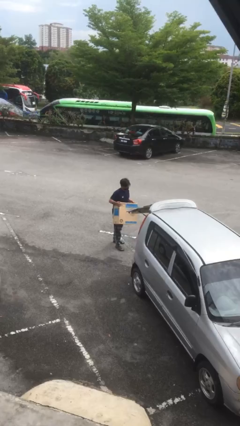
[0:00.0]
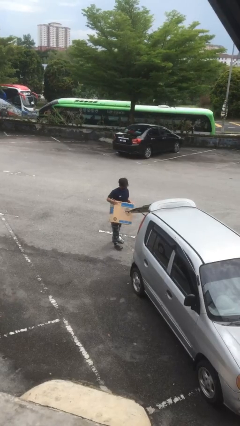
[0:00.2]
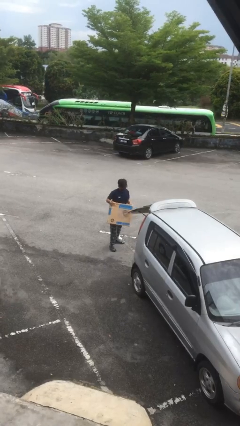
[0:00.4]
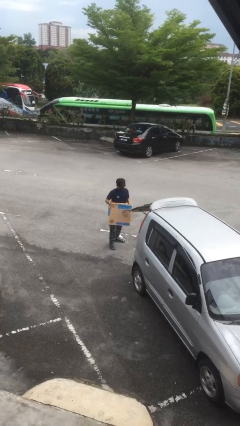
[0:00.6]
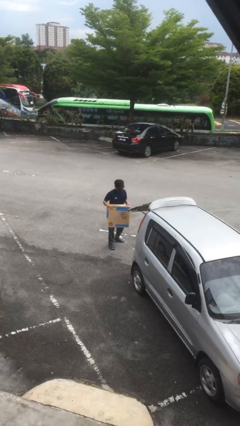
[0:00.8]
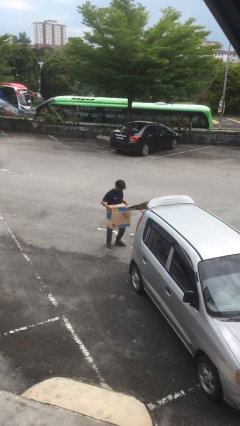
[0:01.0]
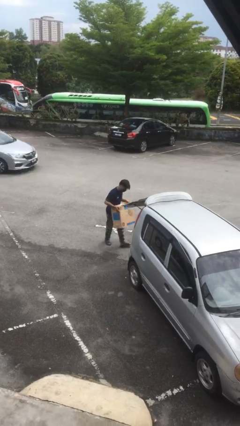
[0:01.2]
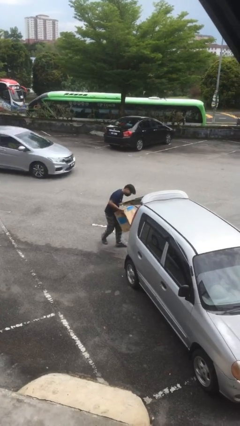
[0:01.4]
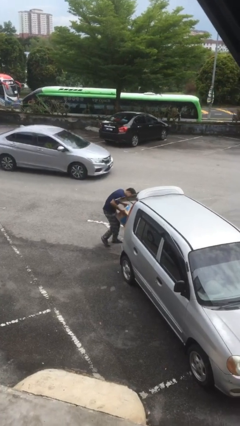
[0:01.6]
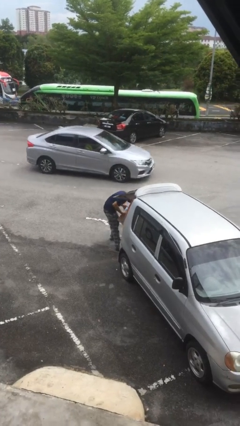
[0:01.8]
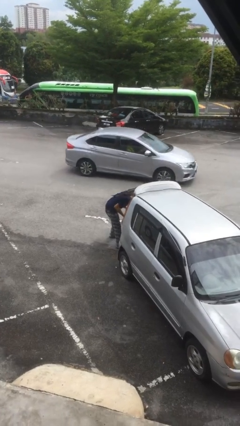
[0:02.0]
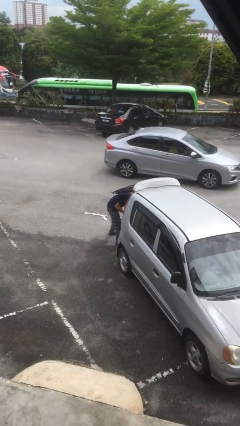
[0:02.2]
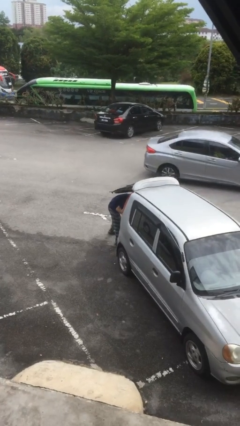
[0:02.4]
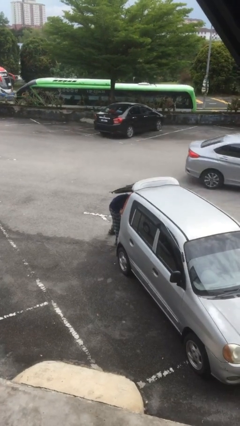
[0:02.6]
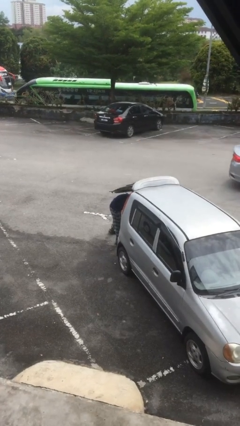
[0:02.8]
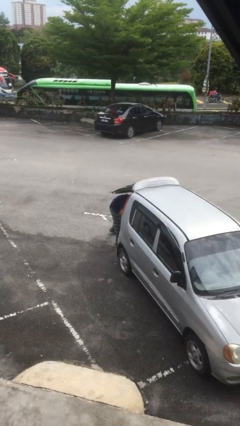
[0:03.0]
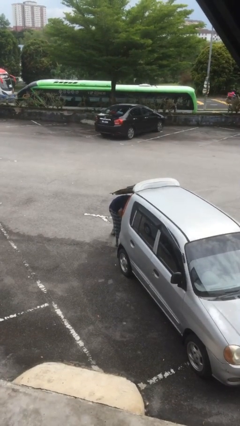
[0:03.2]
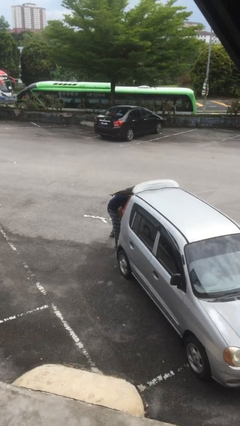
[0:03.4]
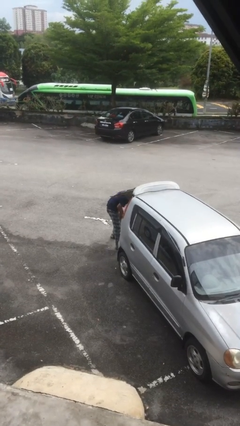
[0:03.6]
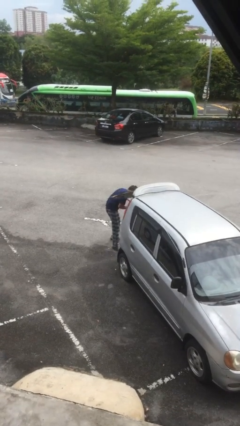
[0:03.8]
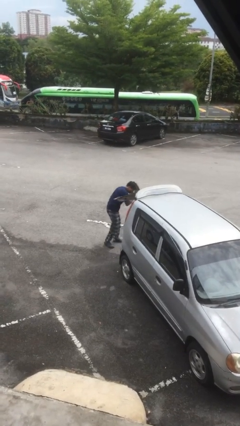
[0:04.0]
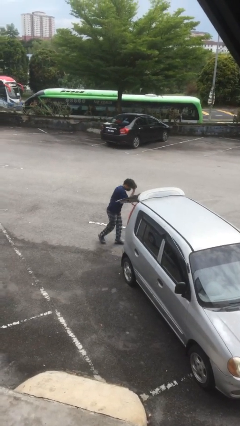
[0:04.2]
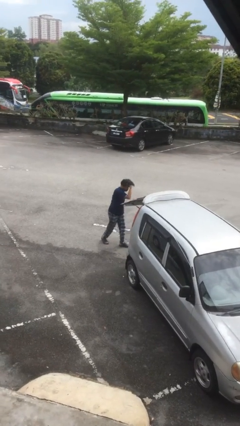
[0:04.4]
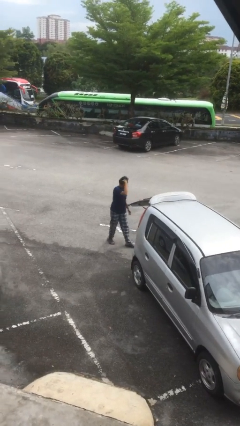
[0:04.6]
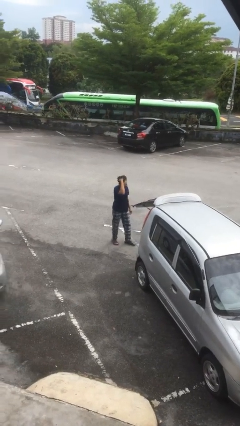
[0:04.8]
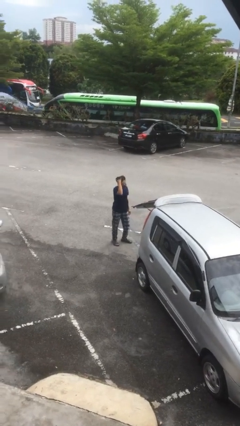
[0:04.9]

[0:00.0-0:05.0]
person loads car

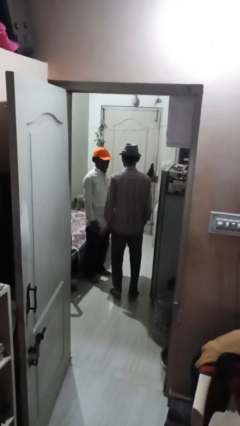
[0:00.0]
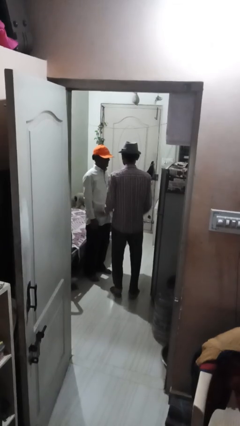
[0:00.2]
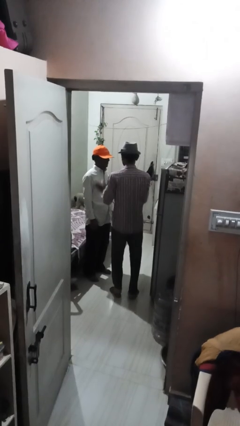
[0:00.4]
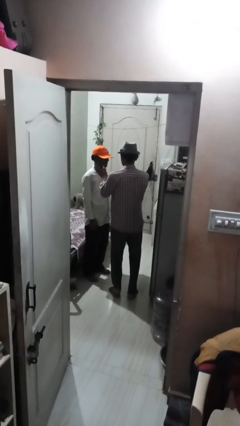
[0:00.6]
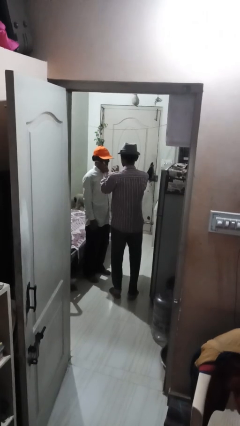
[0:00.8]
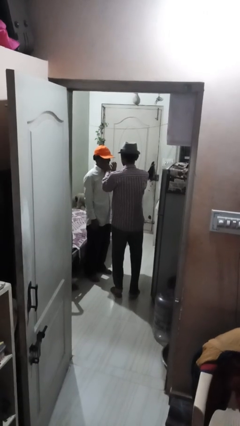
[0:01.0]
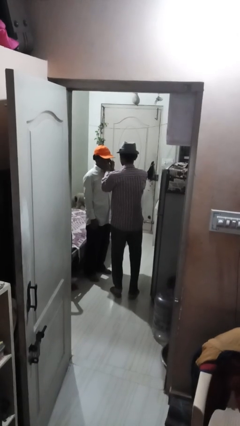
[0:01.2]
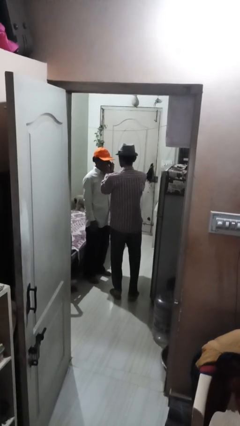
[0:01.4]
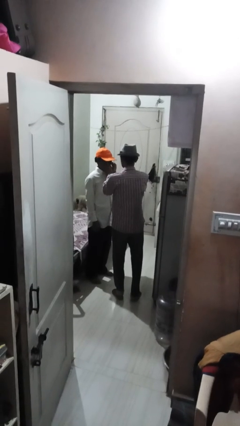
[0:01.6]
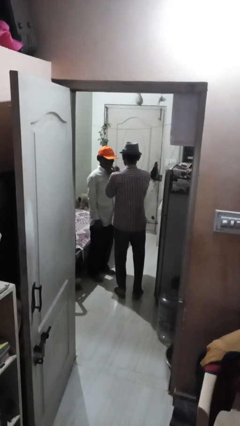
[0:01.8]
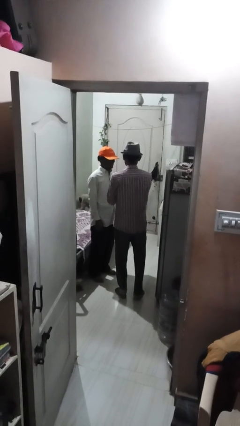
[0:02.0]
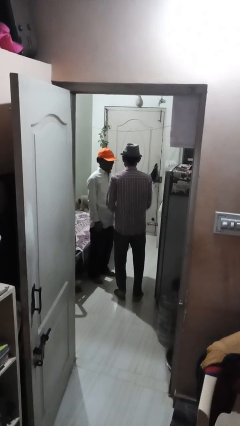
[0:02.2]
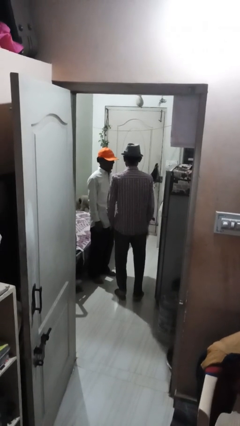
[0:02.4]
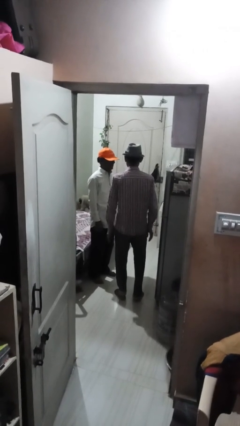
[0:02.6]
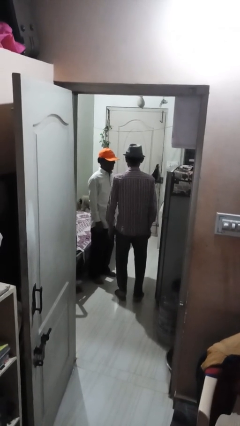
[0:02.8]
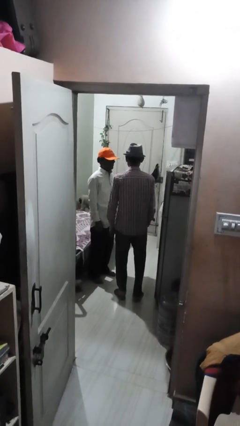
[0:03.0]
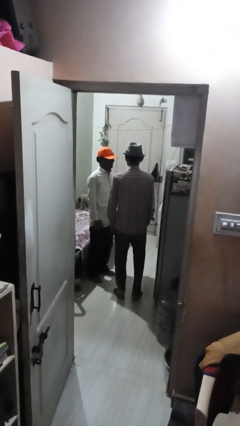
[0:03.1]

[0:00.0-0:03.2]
person touches face of person

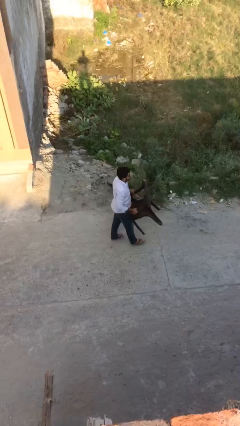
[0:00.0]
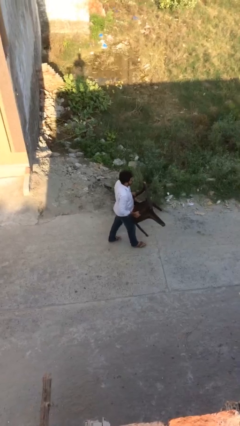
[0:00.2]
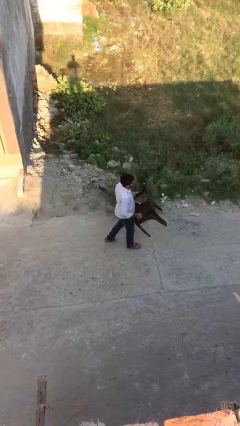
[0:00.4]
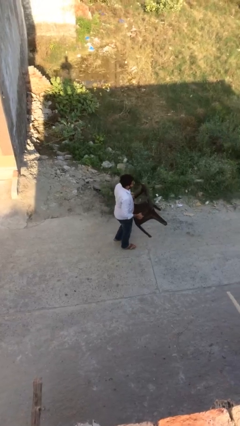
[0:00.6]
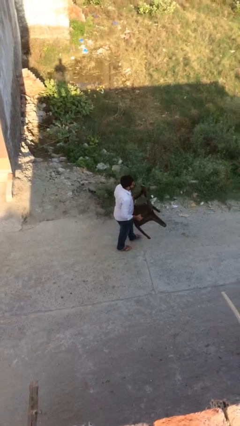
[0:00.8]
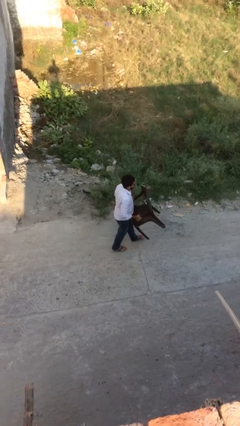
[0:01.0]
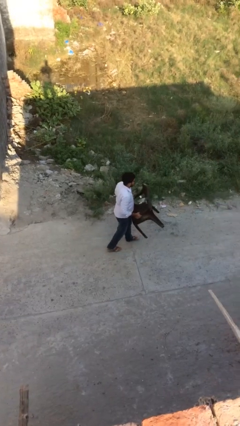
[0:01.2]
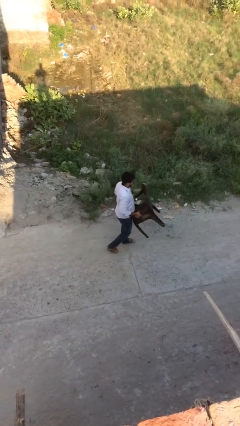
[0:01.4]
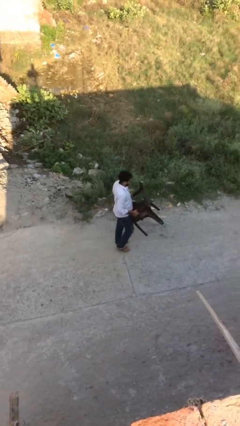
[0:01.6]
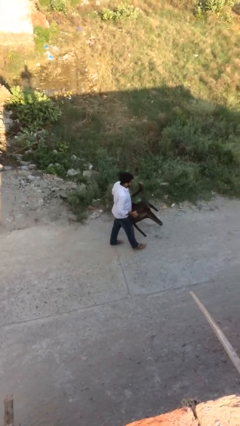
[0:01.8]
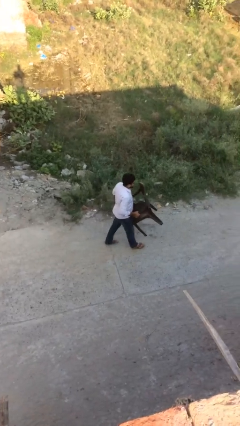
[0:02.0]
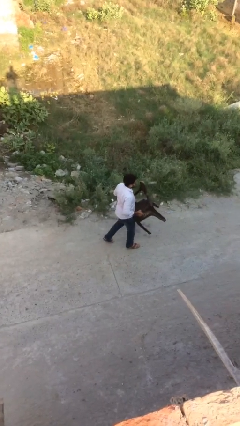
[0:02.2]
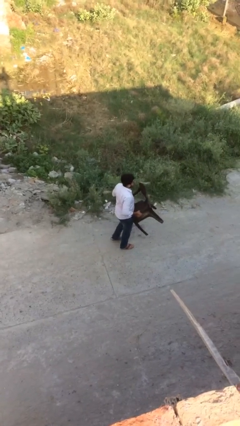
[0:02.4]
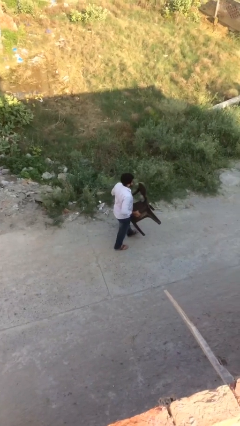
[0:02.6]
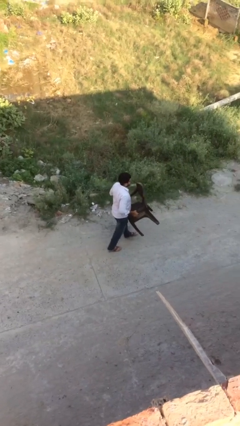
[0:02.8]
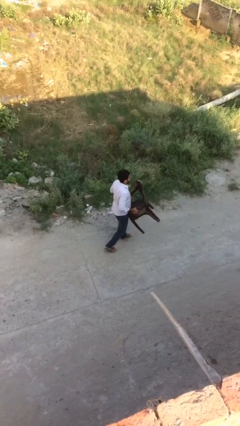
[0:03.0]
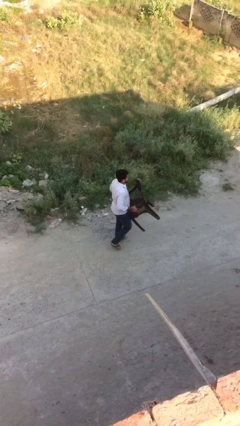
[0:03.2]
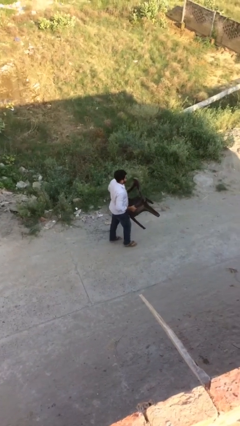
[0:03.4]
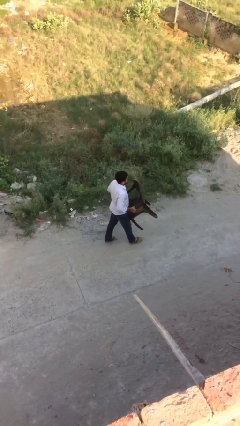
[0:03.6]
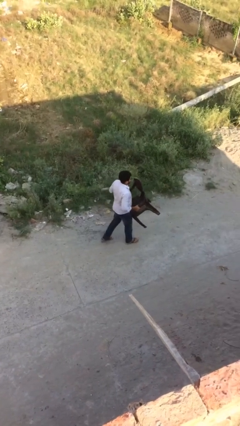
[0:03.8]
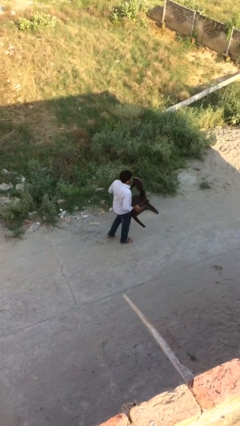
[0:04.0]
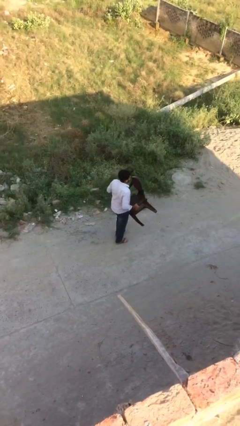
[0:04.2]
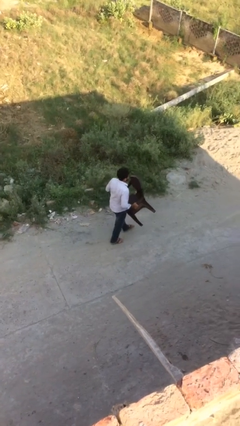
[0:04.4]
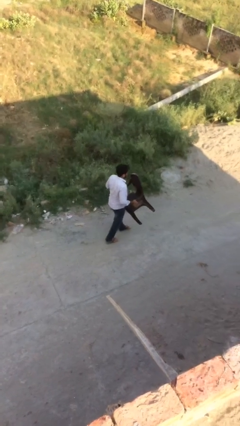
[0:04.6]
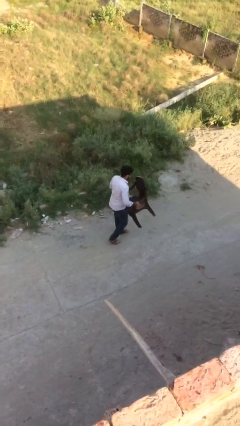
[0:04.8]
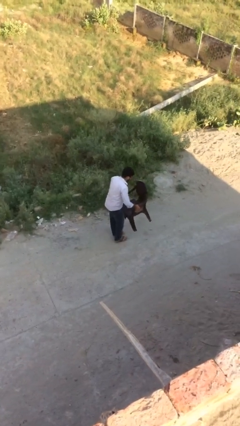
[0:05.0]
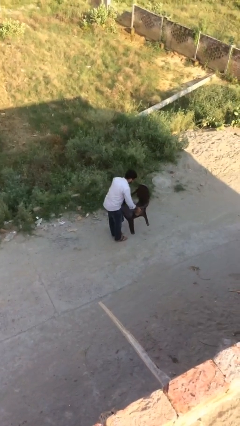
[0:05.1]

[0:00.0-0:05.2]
person carries heavy object

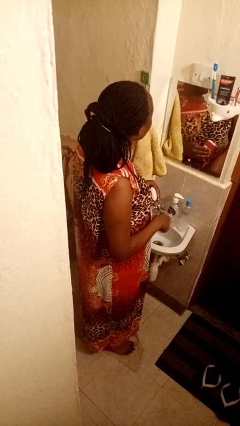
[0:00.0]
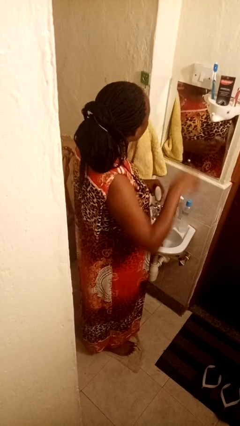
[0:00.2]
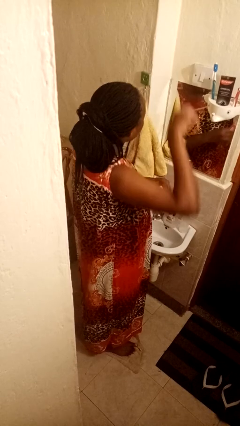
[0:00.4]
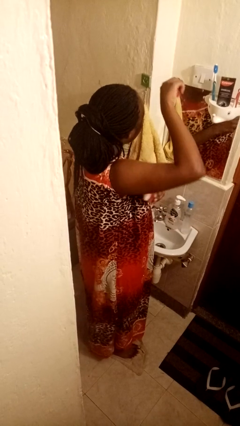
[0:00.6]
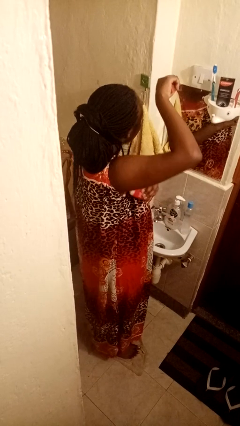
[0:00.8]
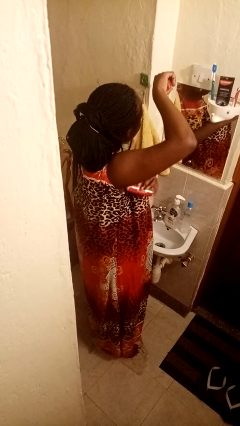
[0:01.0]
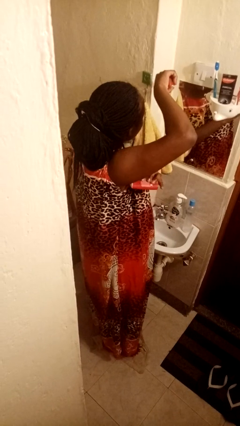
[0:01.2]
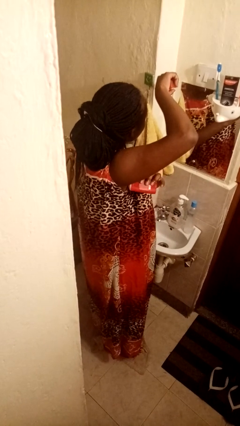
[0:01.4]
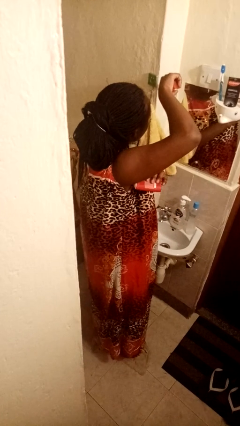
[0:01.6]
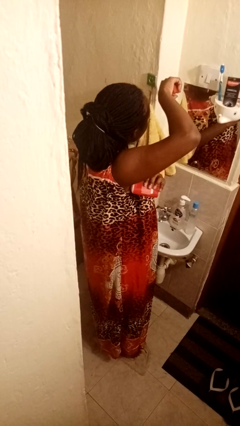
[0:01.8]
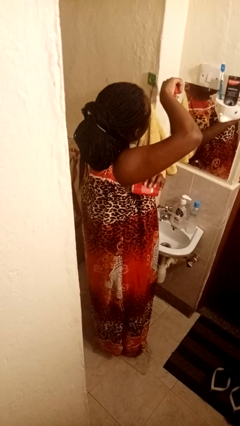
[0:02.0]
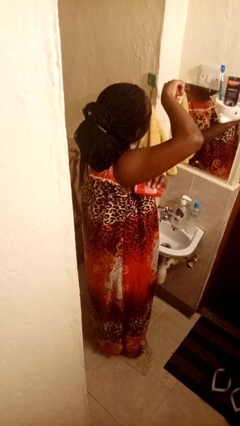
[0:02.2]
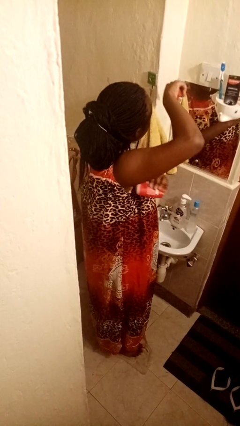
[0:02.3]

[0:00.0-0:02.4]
person applies deodorant

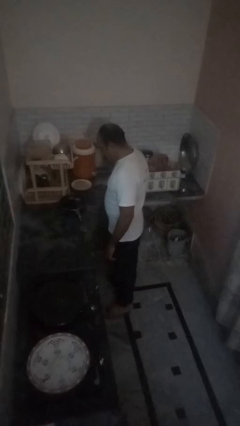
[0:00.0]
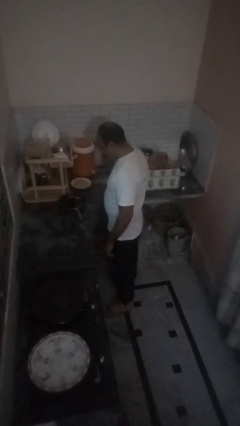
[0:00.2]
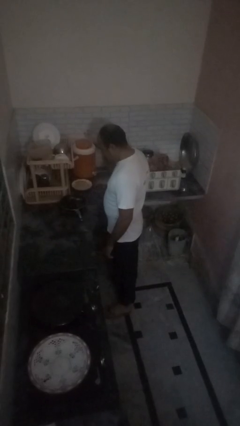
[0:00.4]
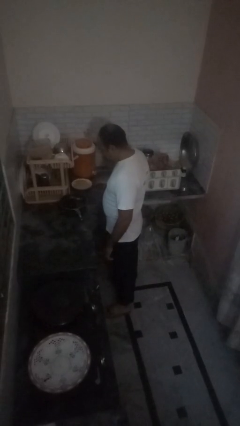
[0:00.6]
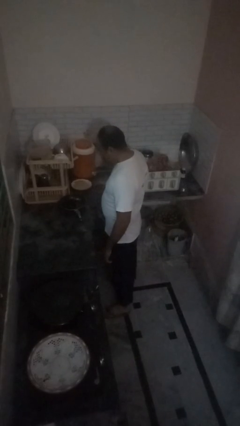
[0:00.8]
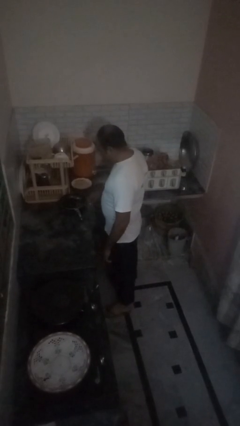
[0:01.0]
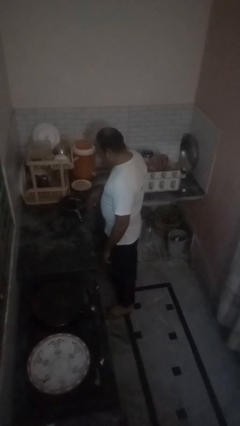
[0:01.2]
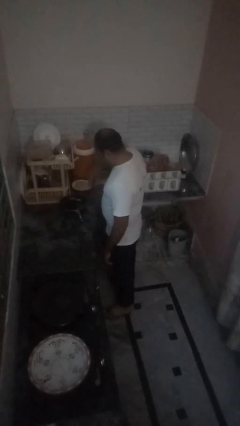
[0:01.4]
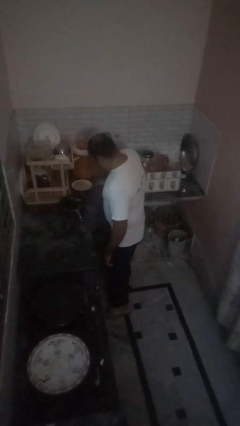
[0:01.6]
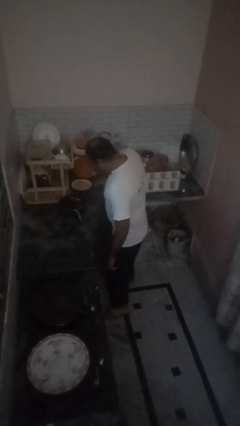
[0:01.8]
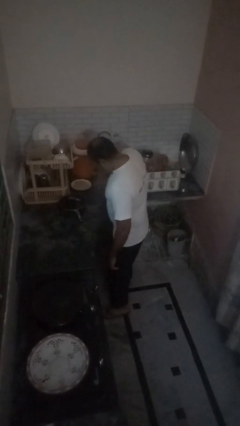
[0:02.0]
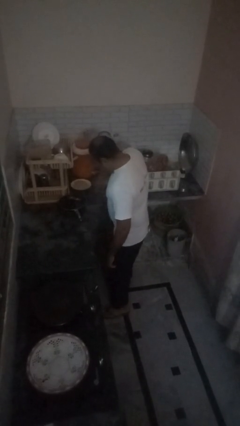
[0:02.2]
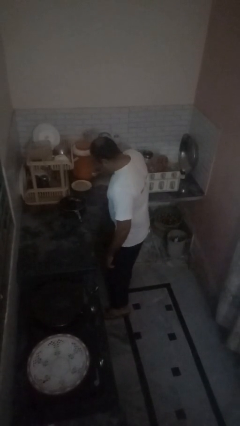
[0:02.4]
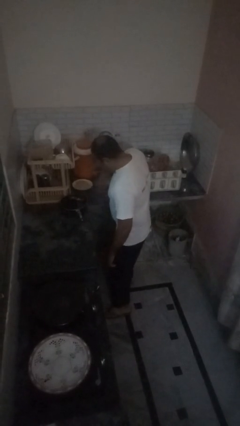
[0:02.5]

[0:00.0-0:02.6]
person burns hand
